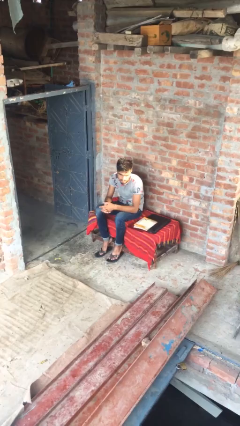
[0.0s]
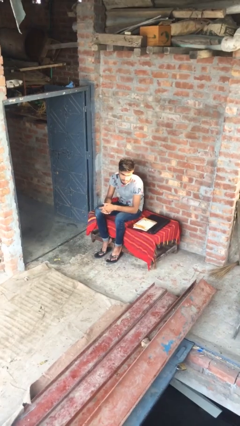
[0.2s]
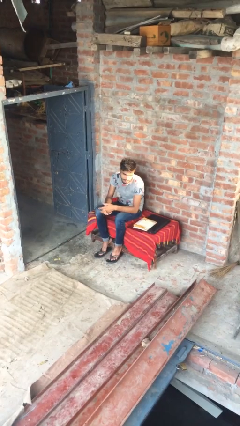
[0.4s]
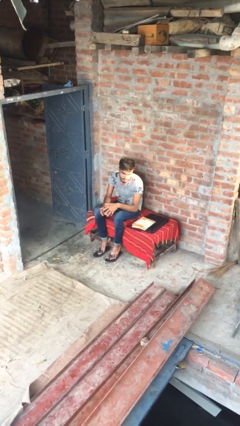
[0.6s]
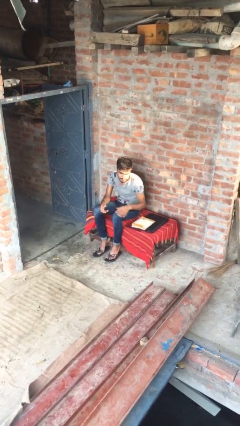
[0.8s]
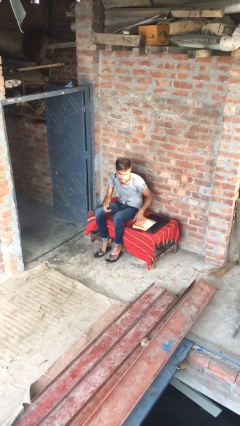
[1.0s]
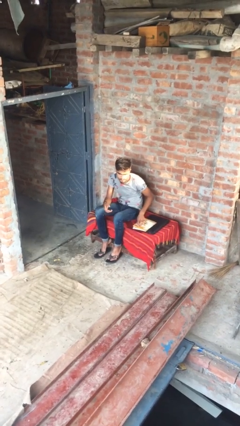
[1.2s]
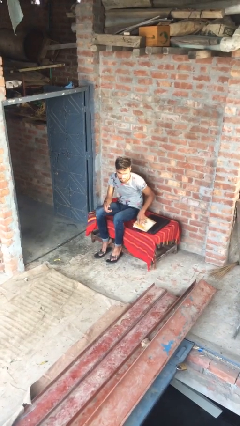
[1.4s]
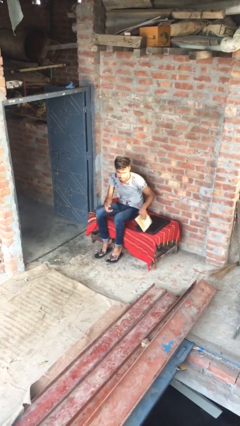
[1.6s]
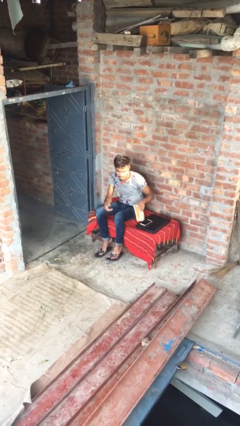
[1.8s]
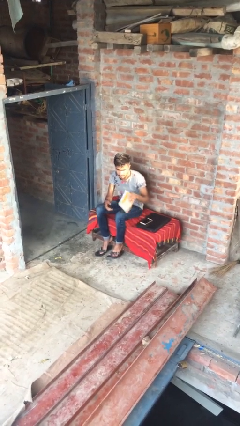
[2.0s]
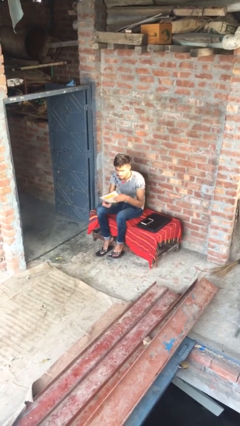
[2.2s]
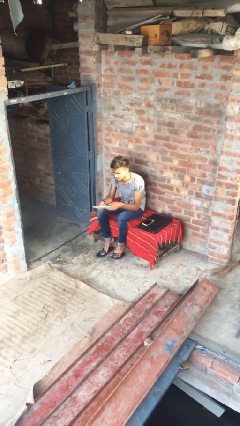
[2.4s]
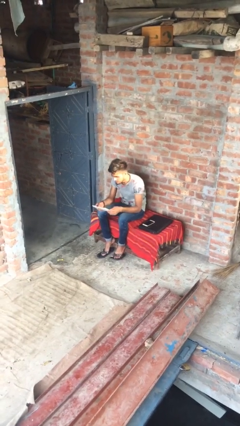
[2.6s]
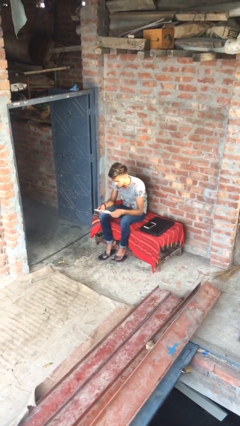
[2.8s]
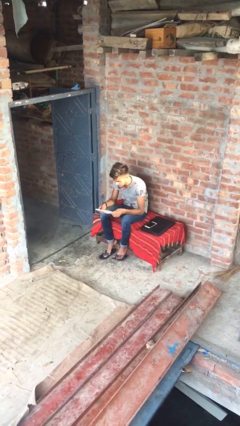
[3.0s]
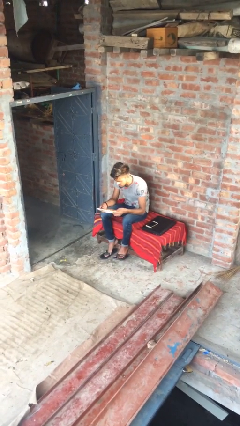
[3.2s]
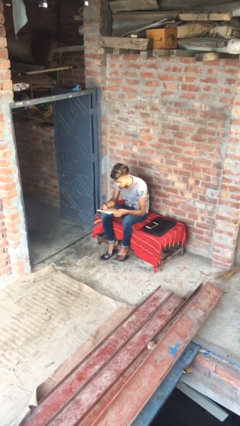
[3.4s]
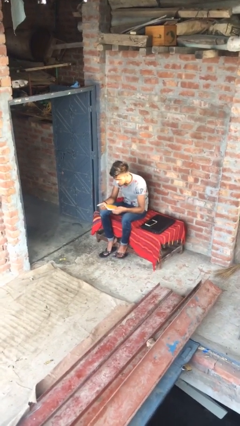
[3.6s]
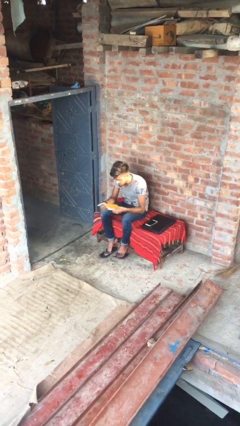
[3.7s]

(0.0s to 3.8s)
person picks up object from table

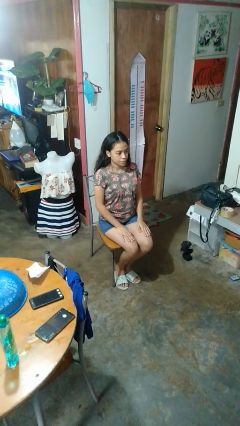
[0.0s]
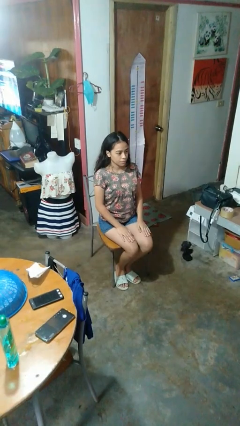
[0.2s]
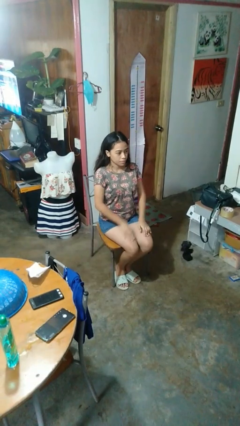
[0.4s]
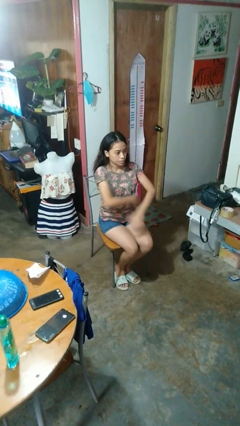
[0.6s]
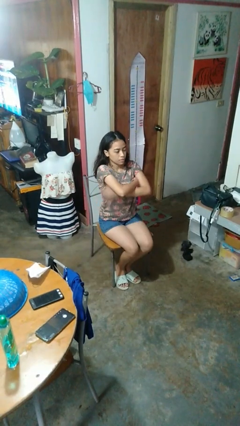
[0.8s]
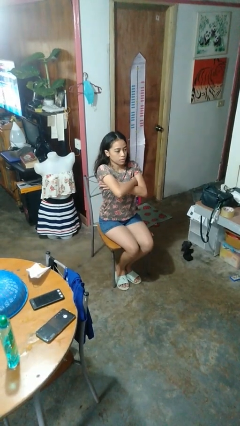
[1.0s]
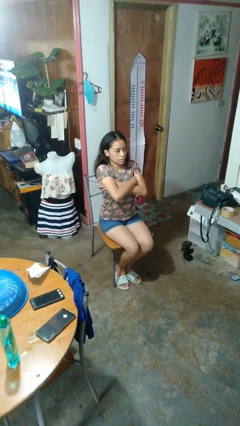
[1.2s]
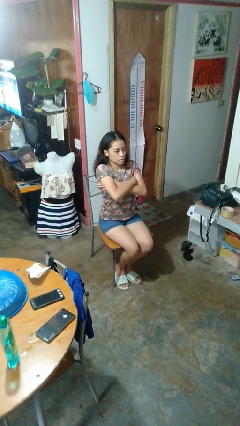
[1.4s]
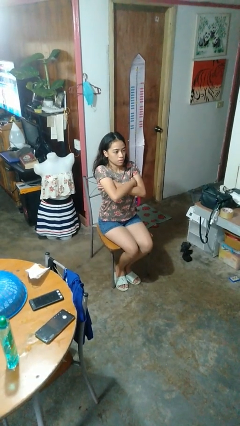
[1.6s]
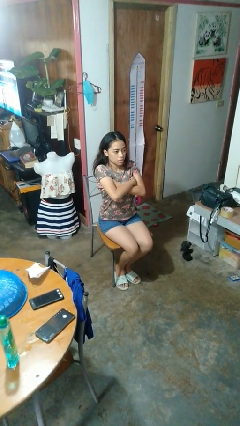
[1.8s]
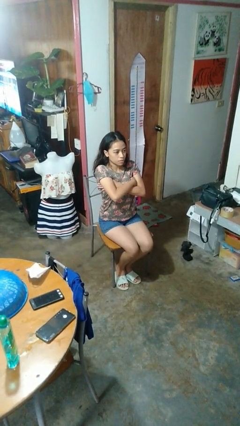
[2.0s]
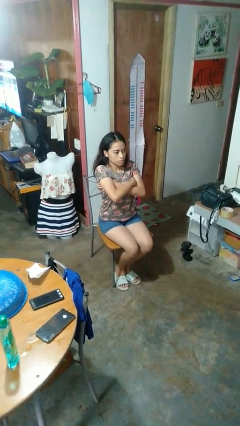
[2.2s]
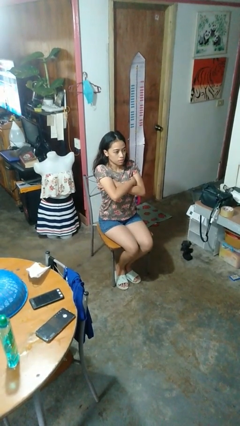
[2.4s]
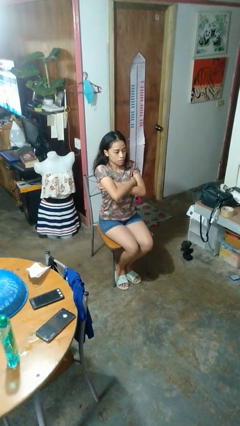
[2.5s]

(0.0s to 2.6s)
person crosses arms

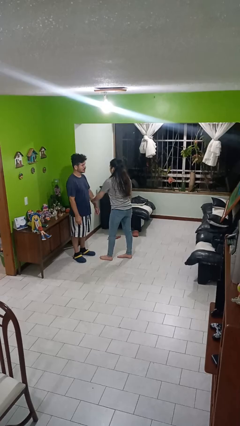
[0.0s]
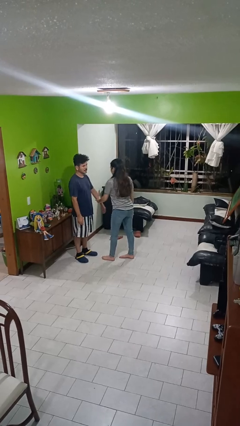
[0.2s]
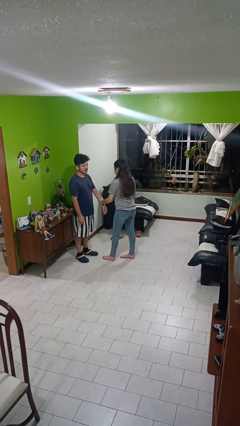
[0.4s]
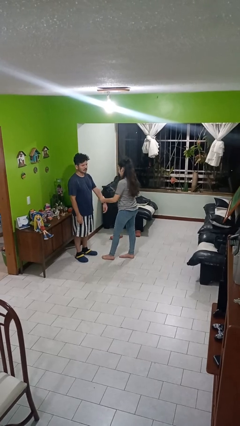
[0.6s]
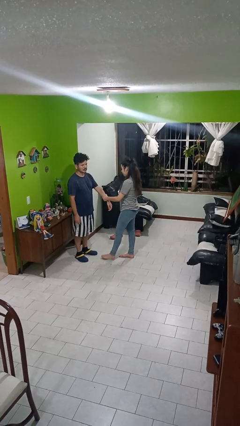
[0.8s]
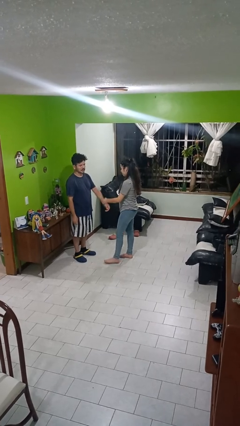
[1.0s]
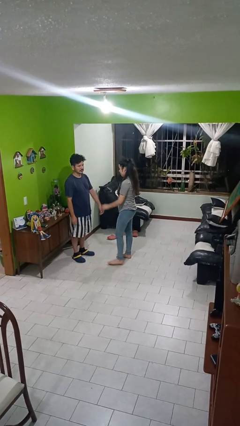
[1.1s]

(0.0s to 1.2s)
person grabs person by forearm

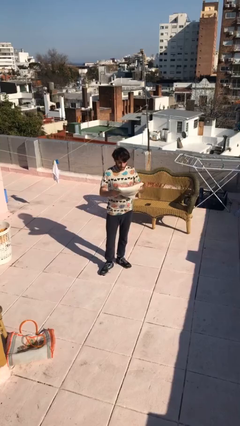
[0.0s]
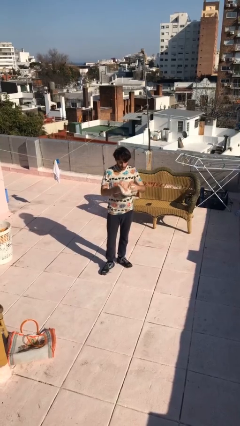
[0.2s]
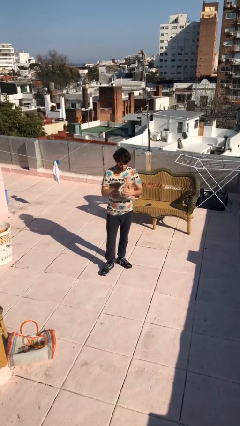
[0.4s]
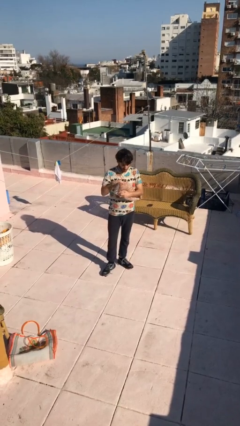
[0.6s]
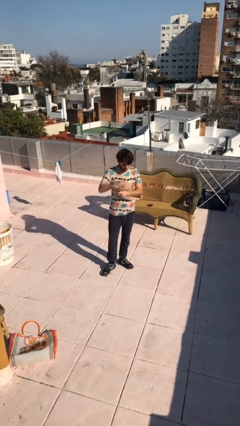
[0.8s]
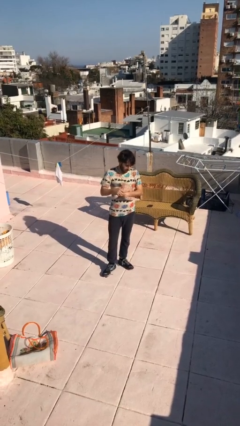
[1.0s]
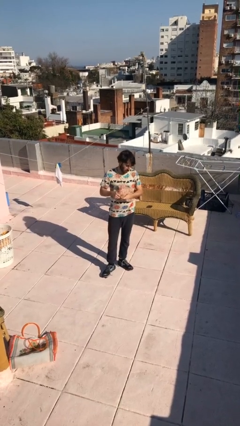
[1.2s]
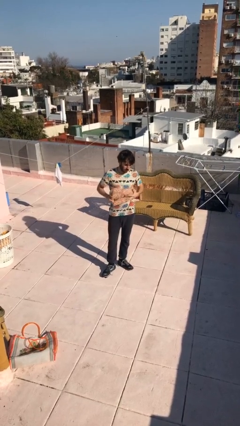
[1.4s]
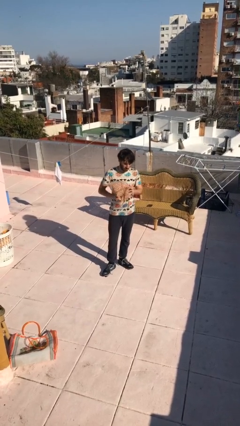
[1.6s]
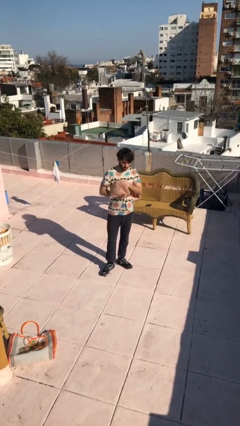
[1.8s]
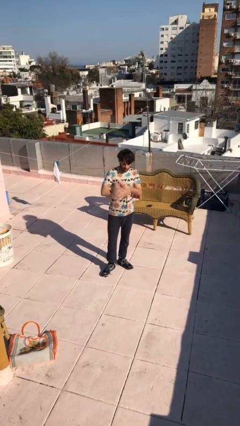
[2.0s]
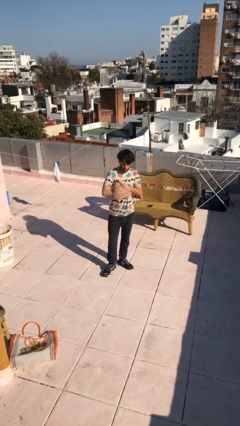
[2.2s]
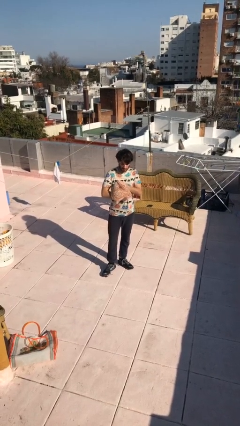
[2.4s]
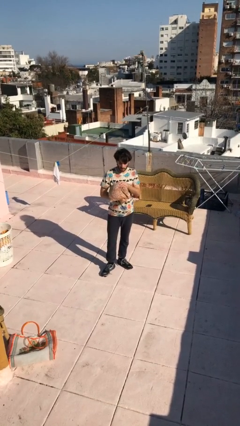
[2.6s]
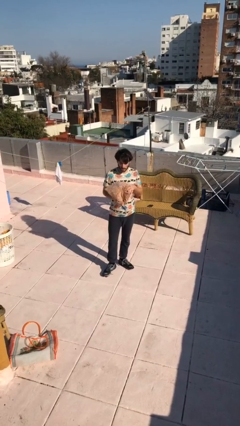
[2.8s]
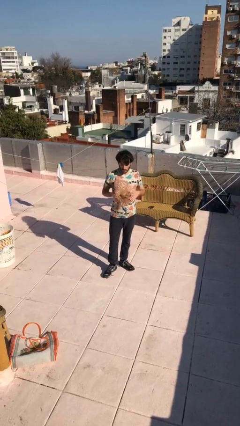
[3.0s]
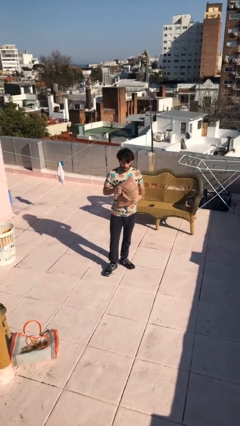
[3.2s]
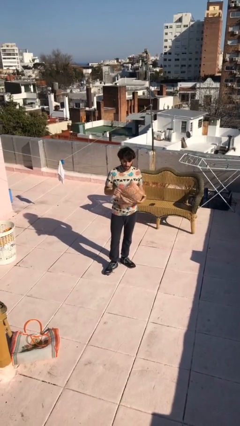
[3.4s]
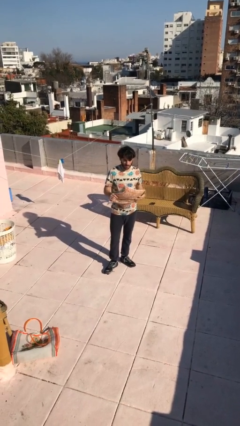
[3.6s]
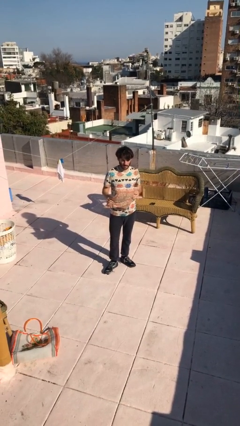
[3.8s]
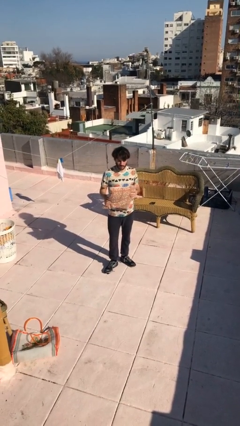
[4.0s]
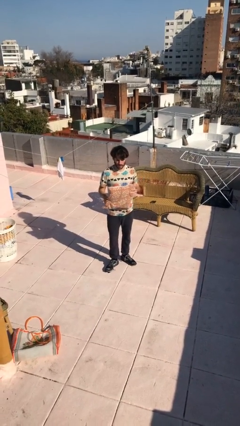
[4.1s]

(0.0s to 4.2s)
person squeezes object

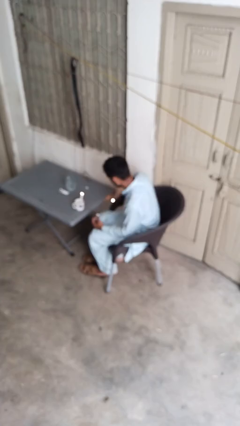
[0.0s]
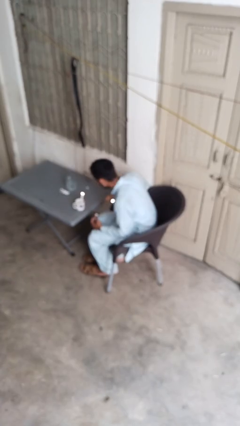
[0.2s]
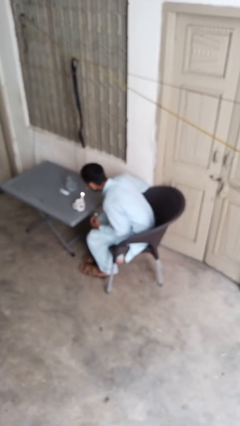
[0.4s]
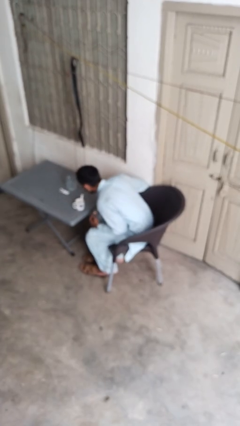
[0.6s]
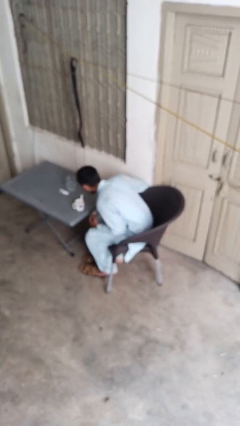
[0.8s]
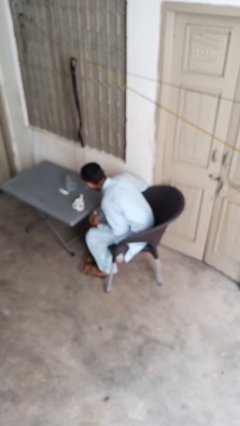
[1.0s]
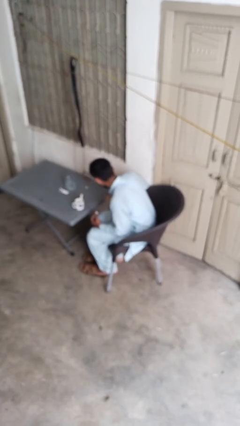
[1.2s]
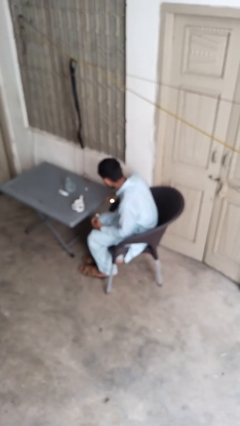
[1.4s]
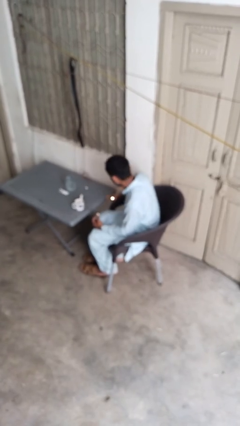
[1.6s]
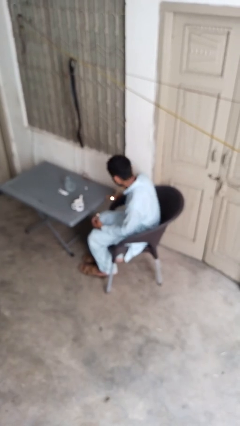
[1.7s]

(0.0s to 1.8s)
person extinguishes candle

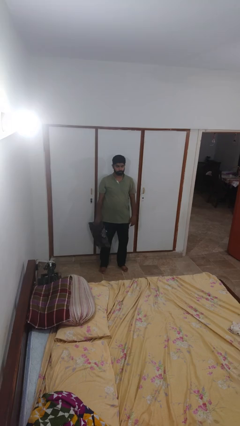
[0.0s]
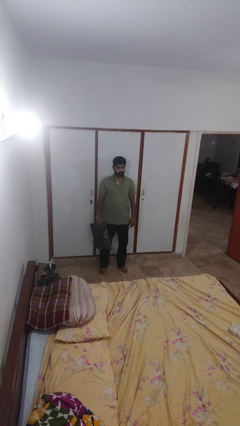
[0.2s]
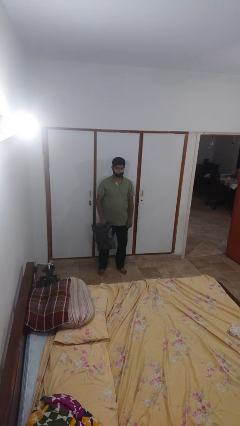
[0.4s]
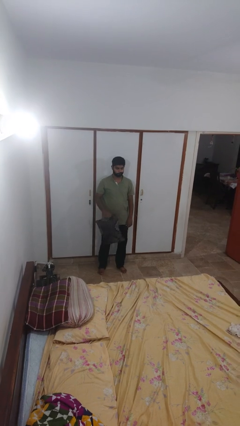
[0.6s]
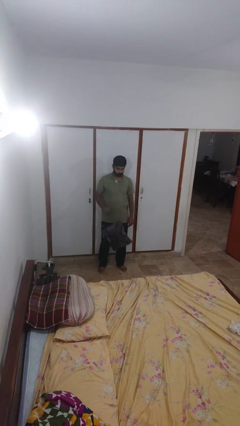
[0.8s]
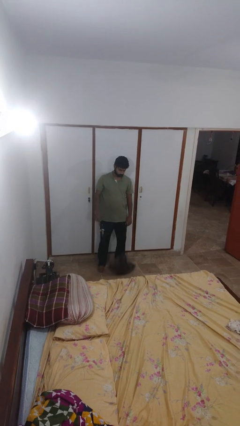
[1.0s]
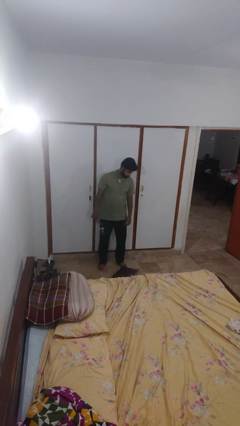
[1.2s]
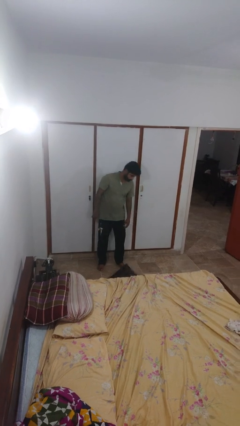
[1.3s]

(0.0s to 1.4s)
person drops object

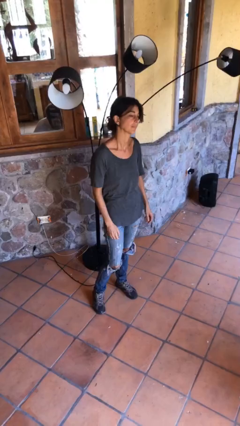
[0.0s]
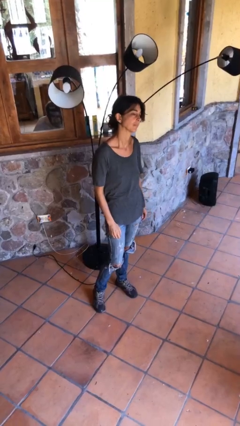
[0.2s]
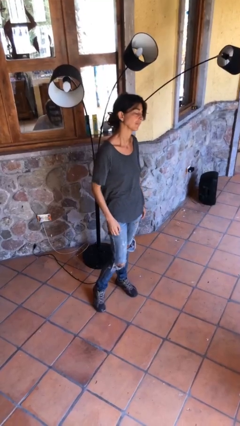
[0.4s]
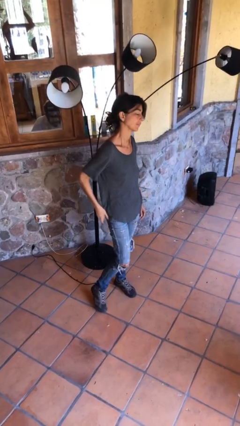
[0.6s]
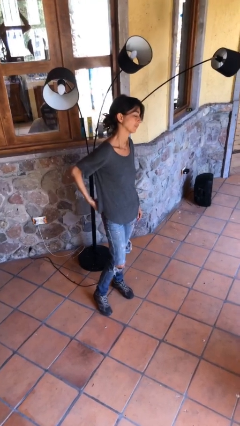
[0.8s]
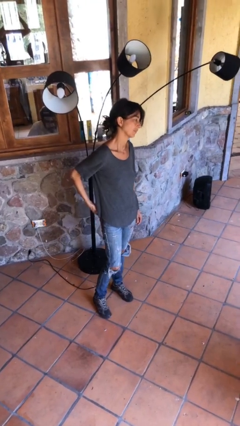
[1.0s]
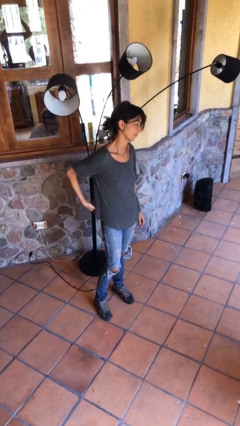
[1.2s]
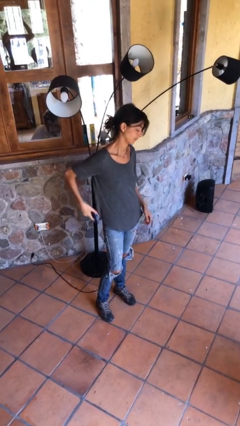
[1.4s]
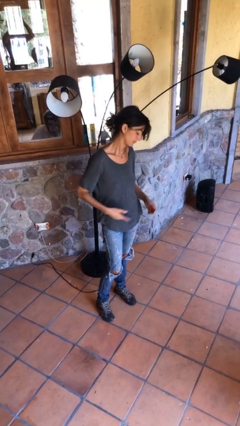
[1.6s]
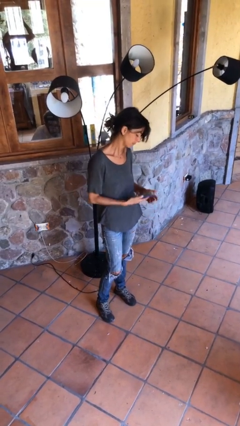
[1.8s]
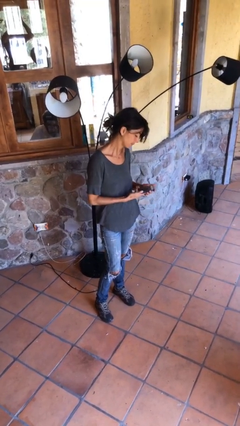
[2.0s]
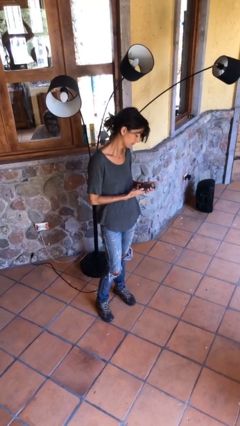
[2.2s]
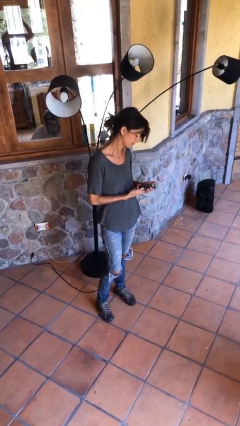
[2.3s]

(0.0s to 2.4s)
person takes phone from pocket
